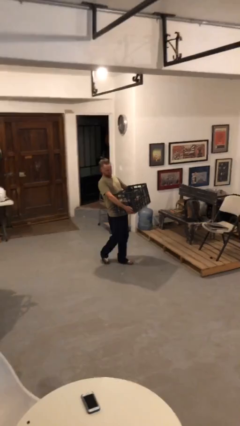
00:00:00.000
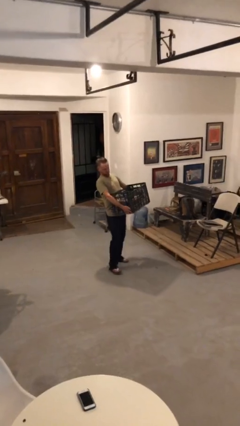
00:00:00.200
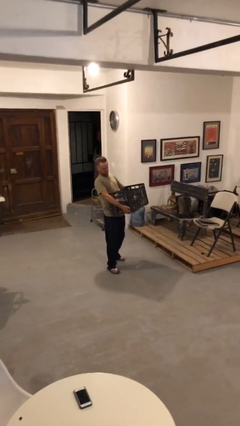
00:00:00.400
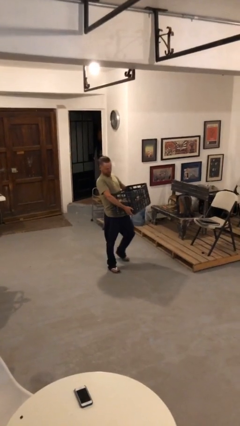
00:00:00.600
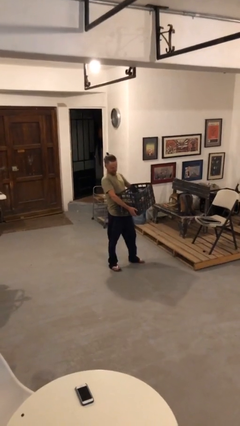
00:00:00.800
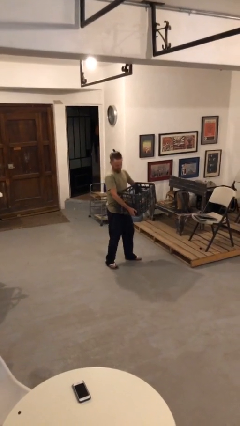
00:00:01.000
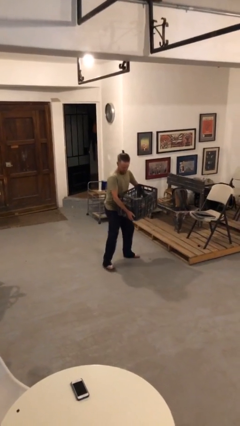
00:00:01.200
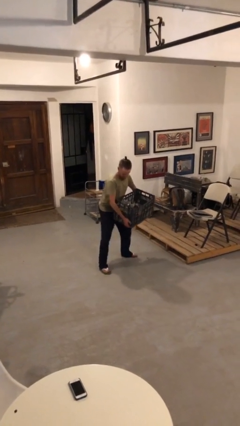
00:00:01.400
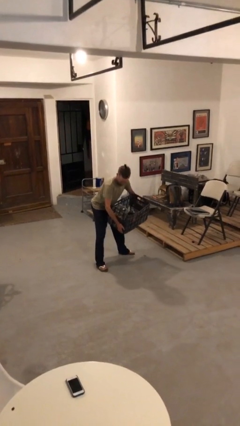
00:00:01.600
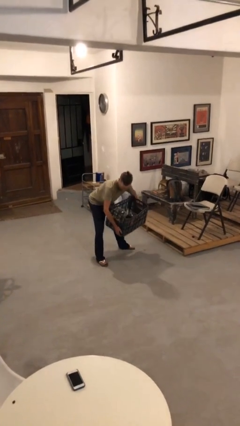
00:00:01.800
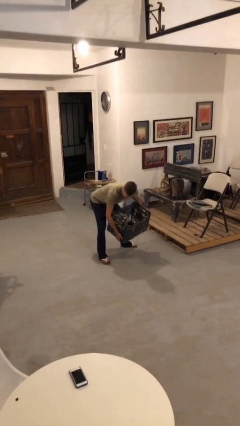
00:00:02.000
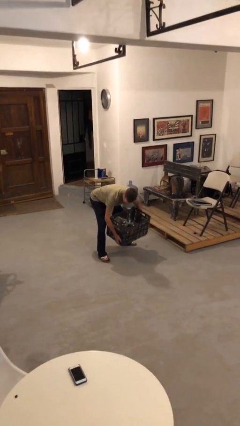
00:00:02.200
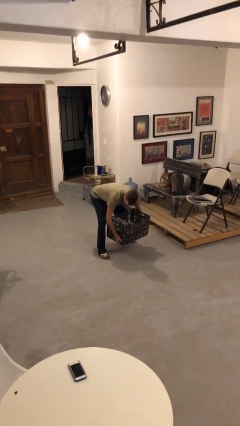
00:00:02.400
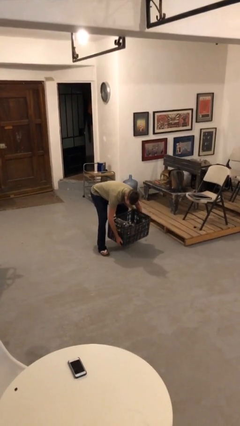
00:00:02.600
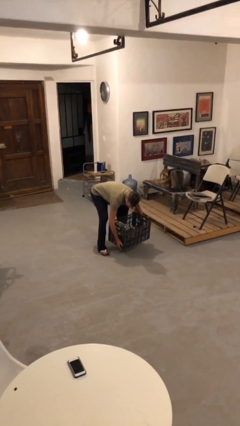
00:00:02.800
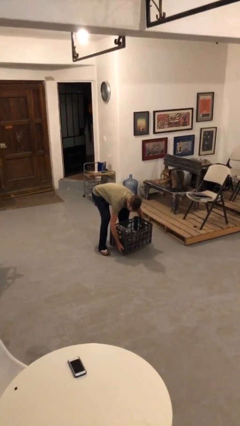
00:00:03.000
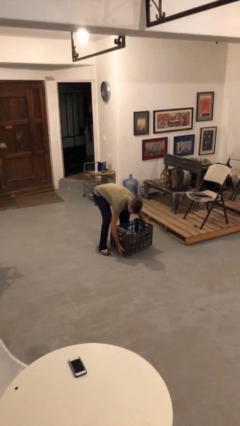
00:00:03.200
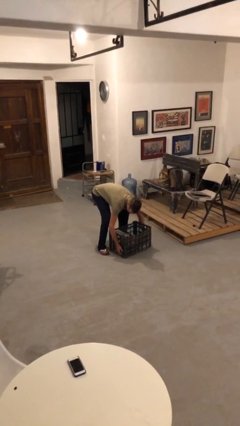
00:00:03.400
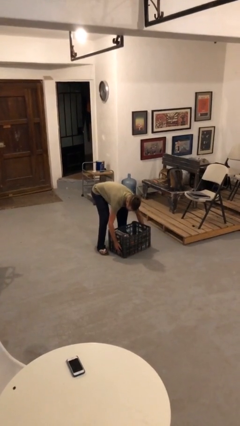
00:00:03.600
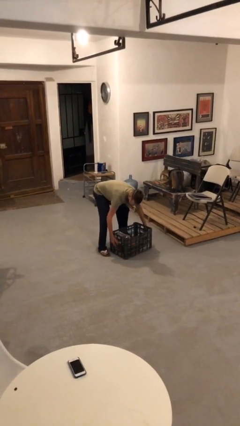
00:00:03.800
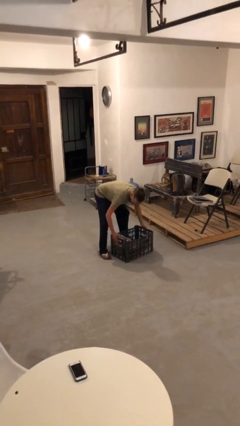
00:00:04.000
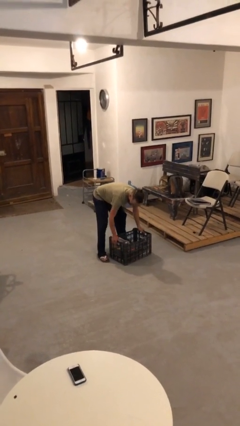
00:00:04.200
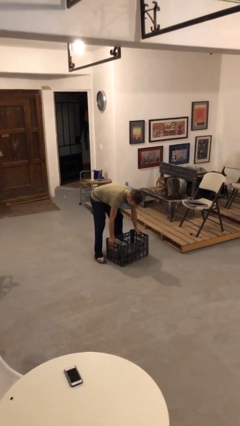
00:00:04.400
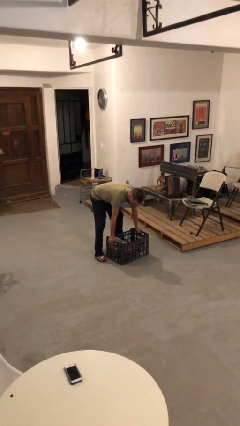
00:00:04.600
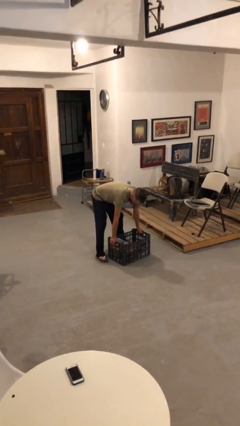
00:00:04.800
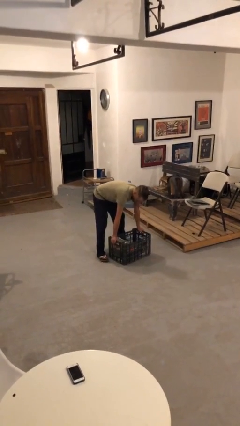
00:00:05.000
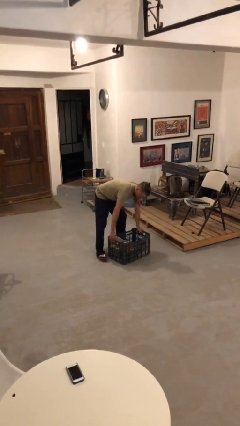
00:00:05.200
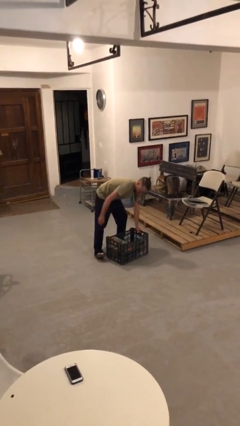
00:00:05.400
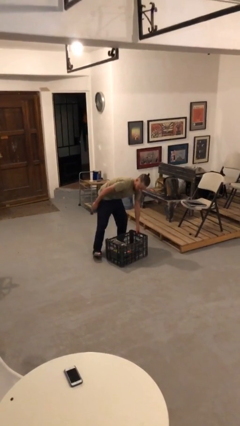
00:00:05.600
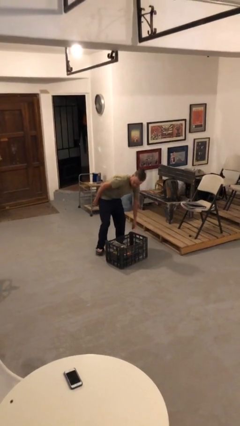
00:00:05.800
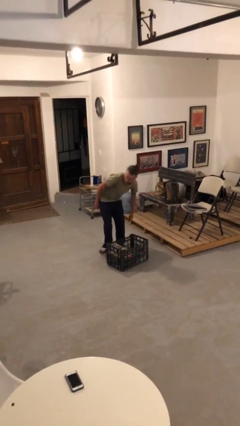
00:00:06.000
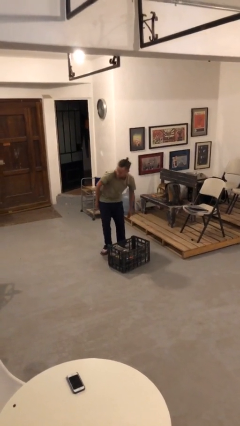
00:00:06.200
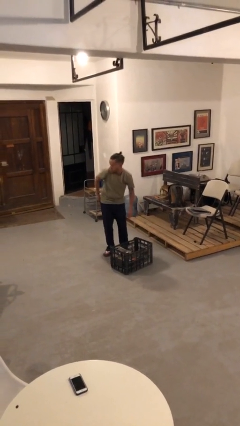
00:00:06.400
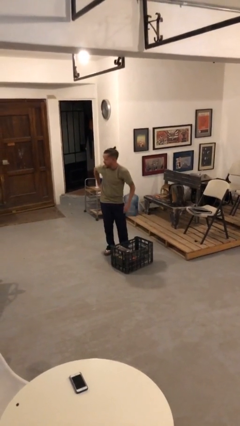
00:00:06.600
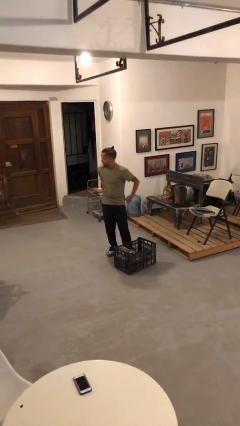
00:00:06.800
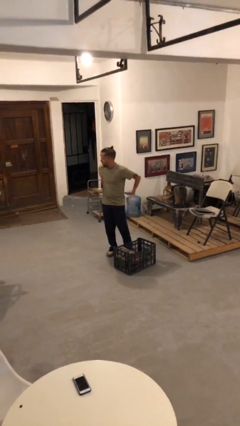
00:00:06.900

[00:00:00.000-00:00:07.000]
person puts down object on floor

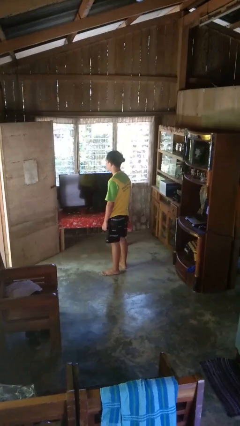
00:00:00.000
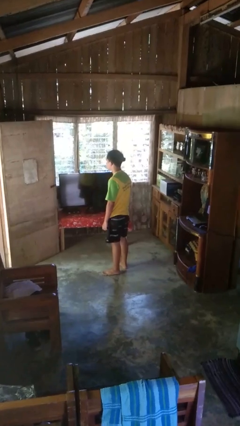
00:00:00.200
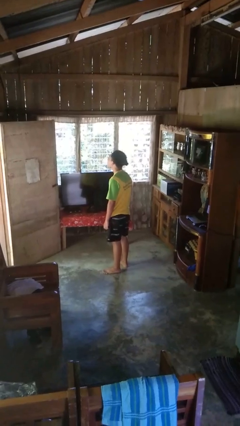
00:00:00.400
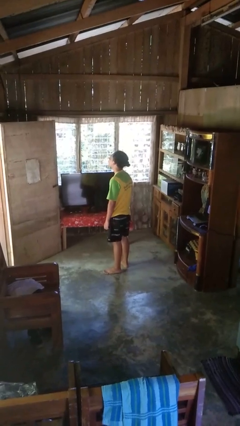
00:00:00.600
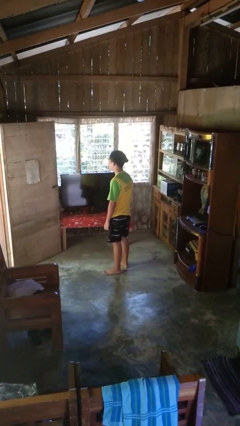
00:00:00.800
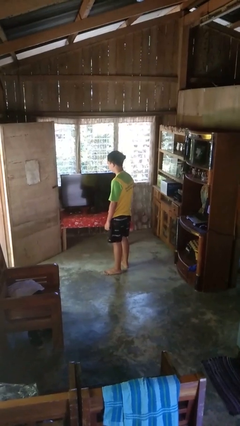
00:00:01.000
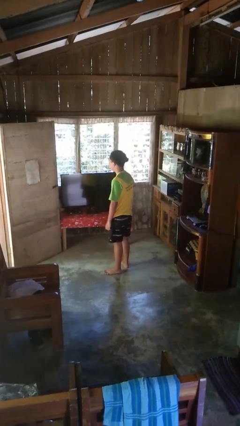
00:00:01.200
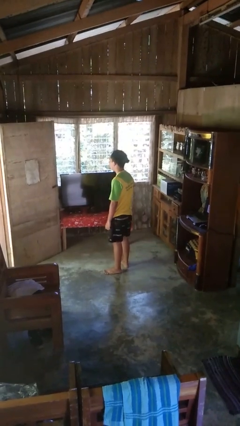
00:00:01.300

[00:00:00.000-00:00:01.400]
person nods head

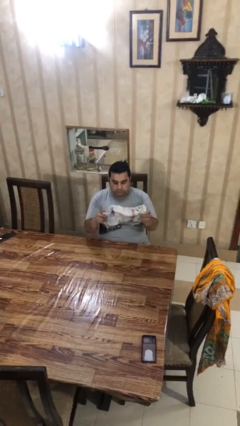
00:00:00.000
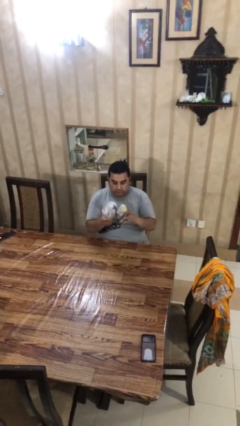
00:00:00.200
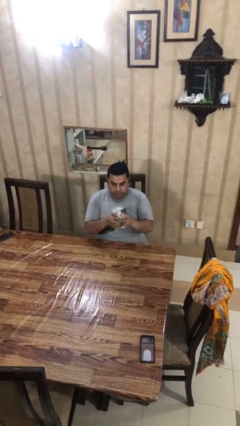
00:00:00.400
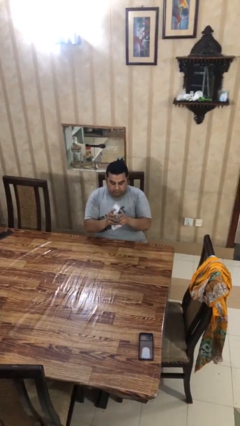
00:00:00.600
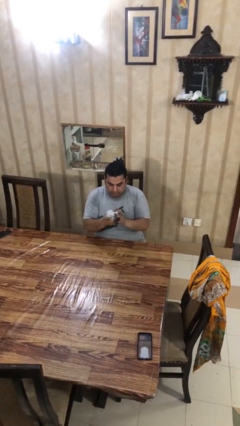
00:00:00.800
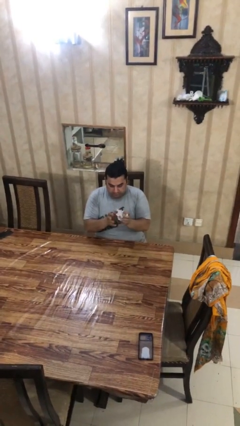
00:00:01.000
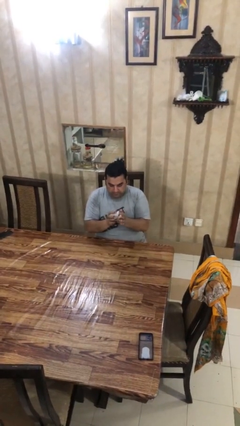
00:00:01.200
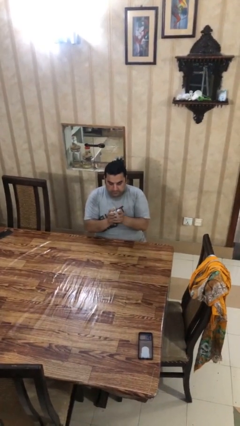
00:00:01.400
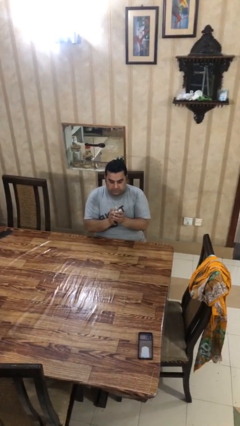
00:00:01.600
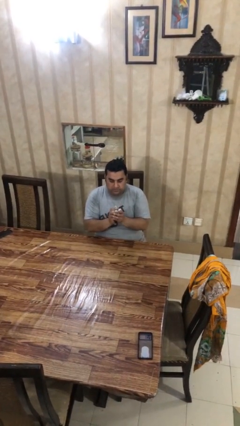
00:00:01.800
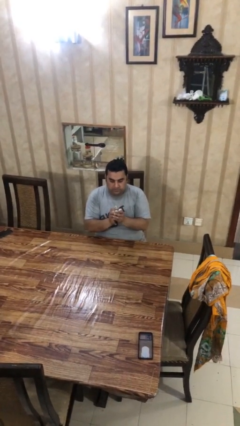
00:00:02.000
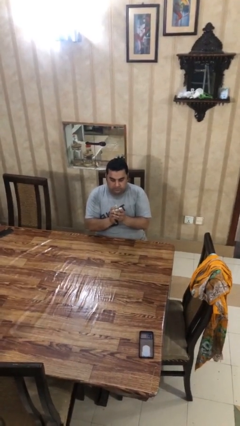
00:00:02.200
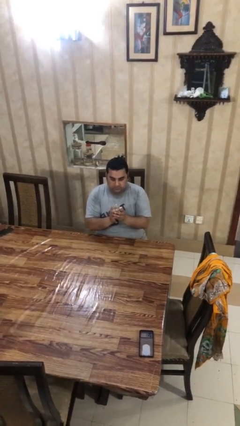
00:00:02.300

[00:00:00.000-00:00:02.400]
person crumples paper

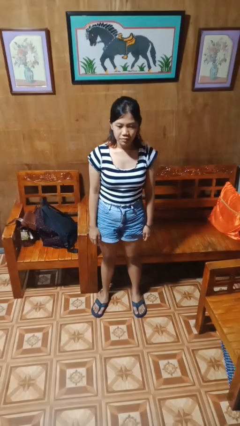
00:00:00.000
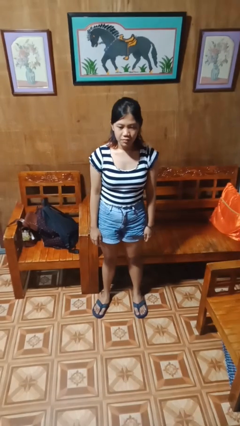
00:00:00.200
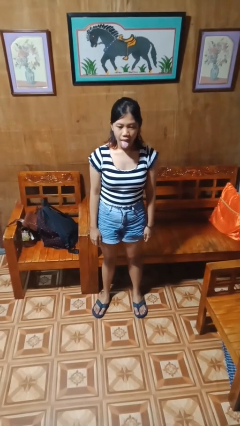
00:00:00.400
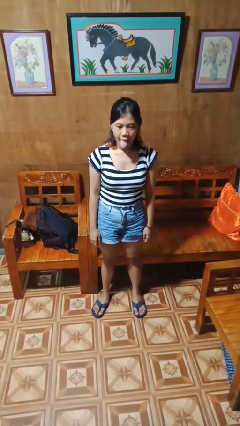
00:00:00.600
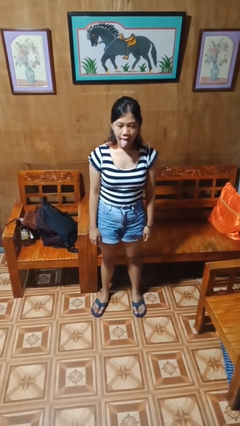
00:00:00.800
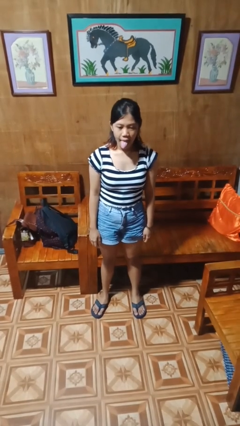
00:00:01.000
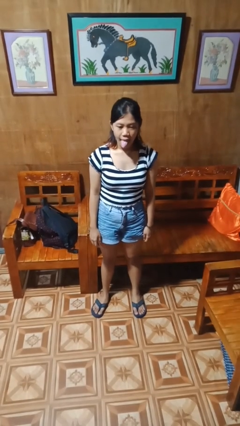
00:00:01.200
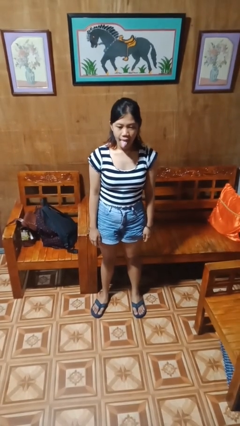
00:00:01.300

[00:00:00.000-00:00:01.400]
person sticks out tongue

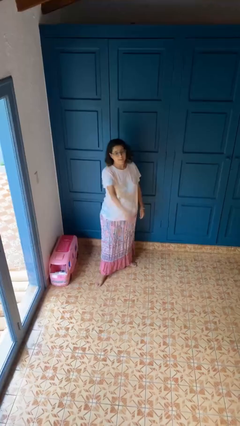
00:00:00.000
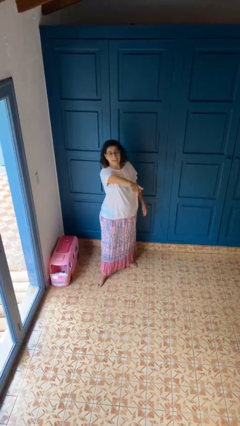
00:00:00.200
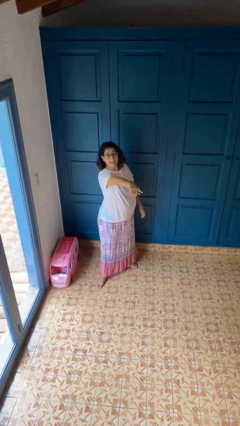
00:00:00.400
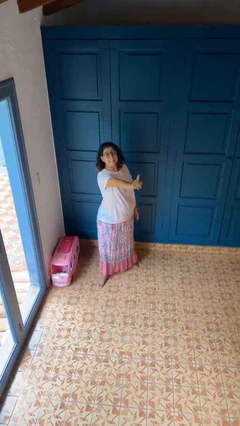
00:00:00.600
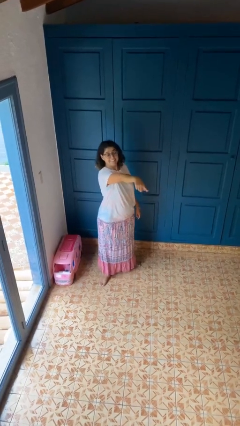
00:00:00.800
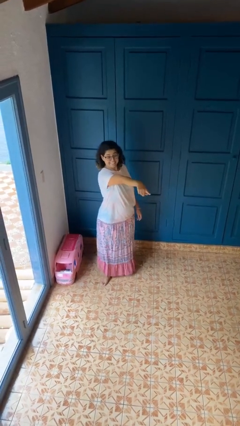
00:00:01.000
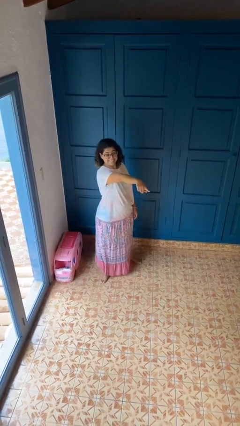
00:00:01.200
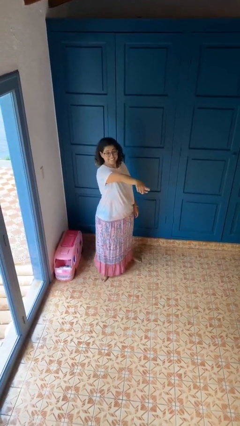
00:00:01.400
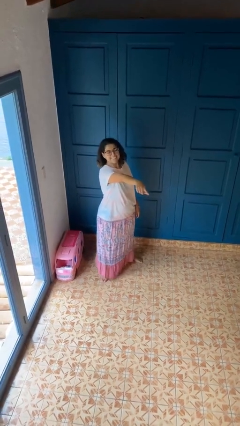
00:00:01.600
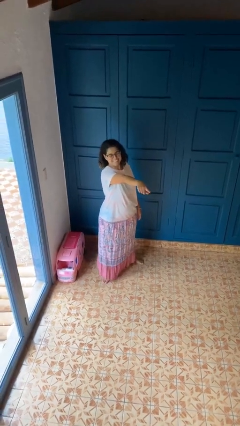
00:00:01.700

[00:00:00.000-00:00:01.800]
person points at person

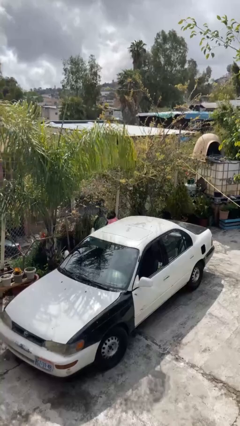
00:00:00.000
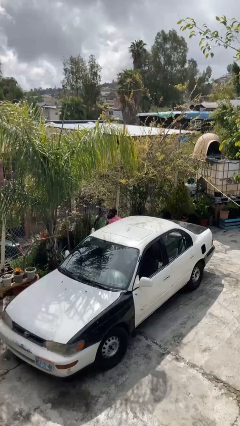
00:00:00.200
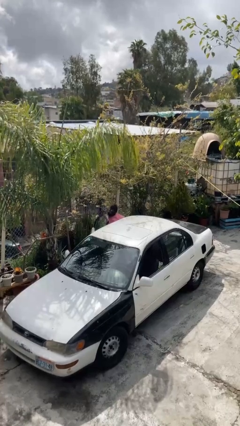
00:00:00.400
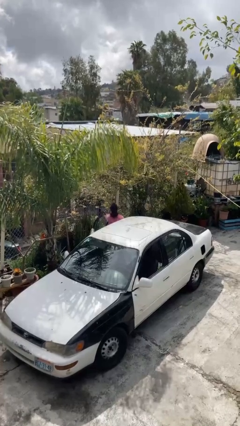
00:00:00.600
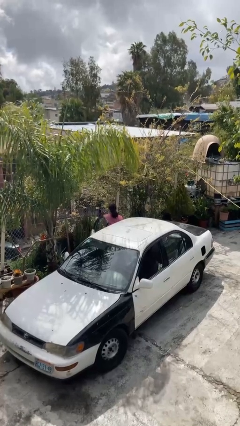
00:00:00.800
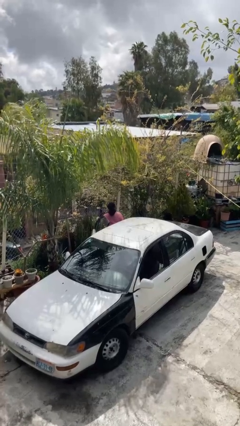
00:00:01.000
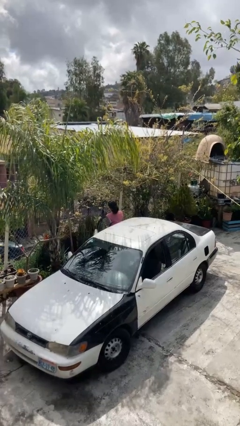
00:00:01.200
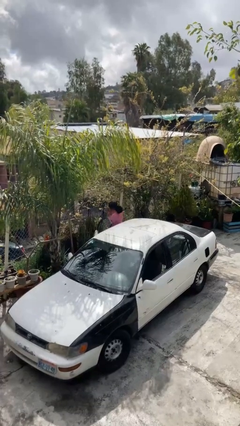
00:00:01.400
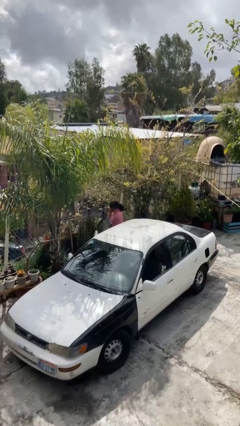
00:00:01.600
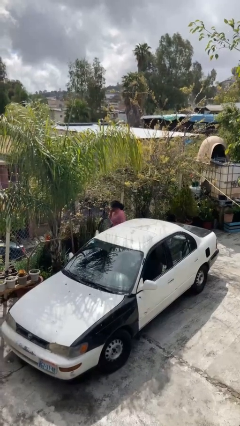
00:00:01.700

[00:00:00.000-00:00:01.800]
person exits car

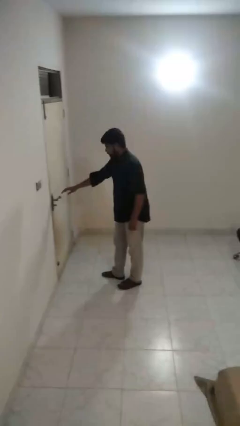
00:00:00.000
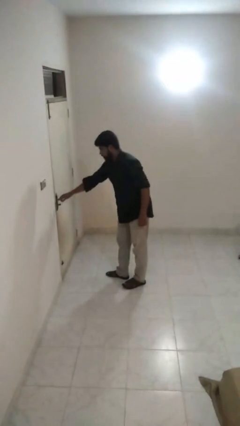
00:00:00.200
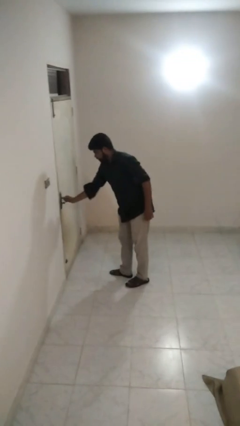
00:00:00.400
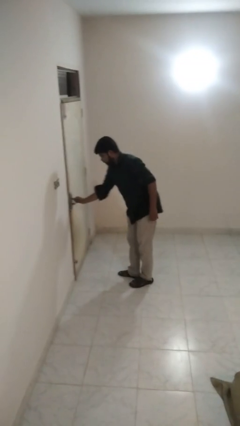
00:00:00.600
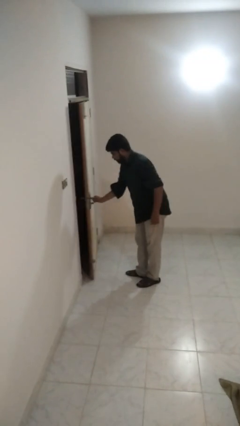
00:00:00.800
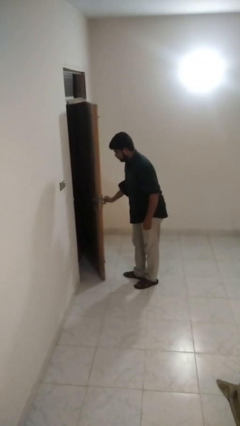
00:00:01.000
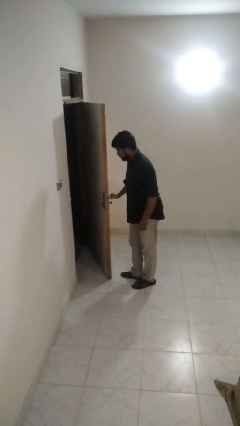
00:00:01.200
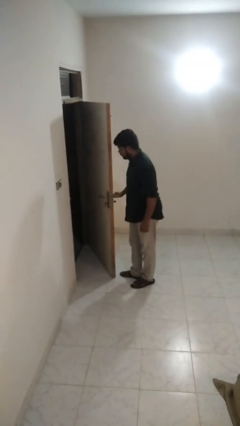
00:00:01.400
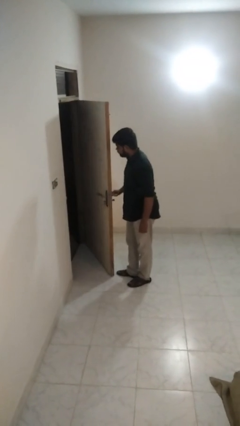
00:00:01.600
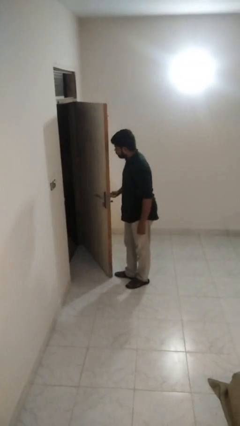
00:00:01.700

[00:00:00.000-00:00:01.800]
person opens facility door
